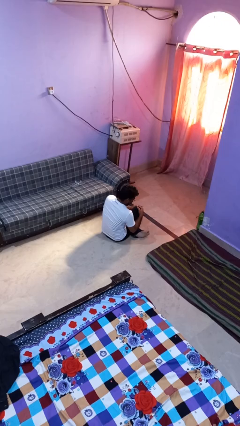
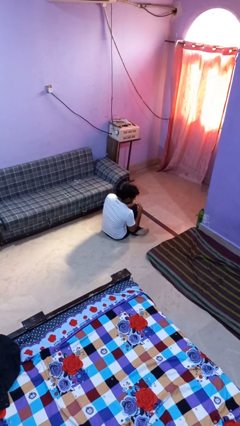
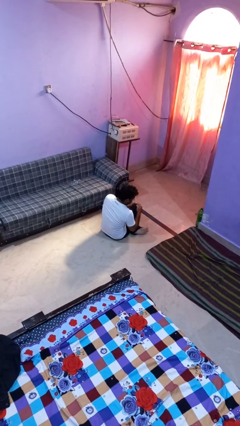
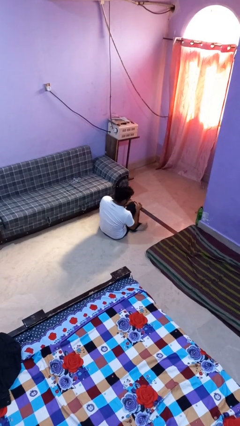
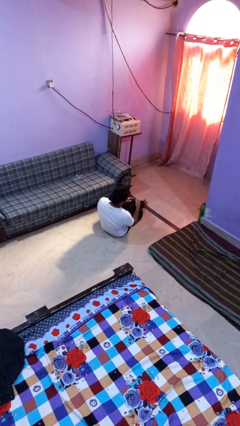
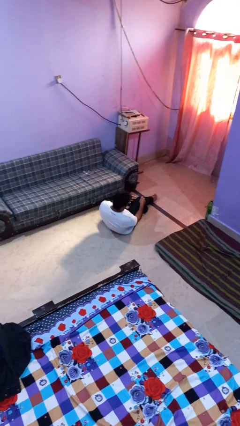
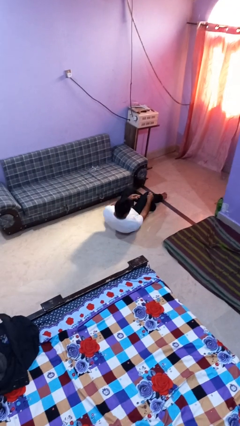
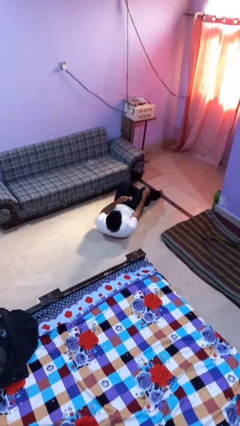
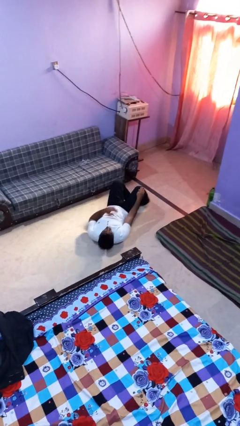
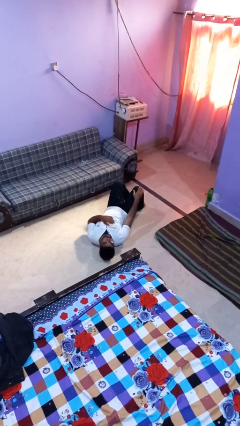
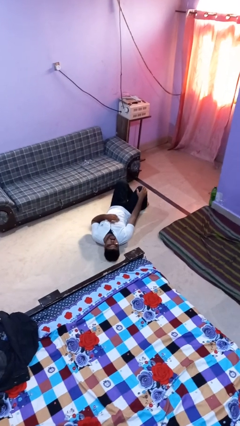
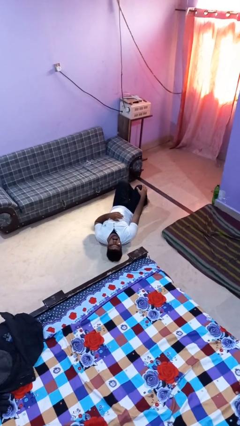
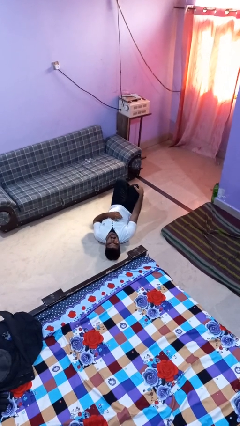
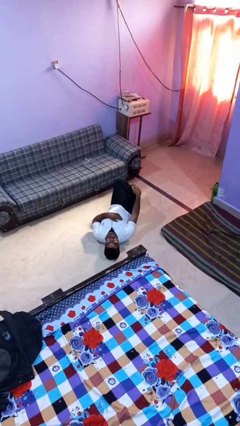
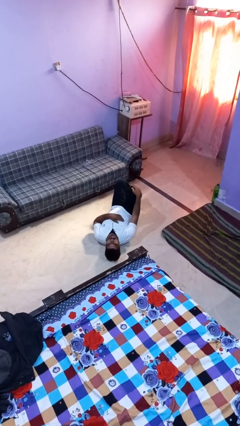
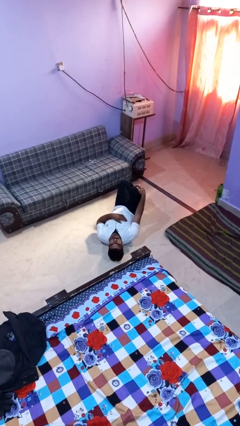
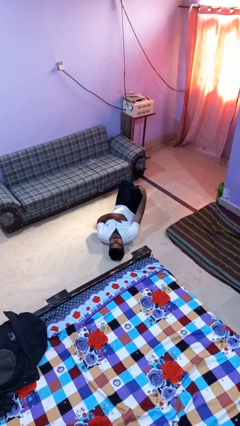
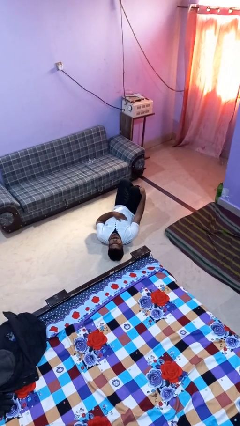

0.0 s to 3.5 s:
person lies down on floor

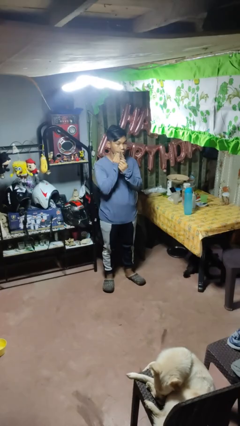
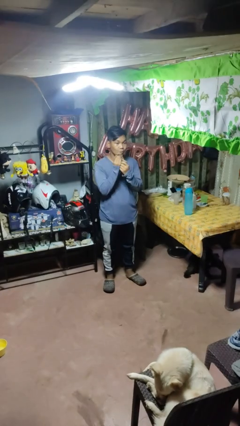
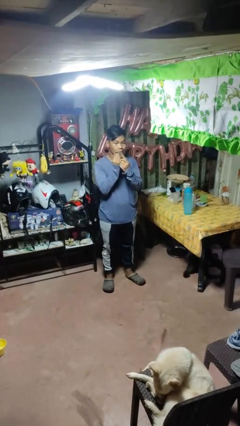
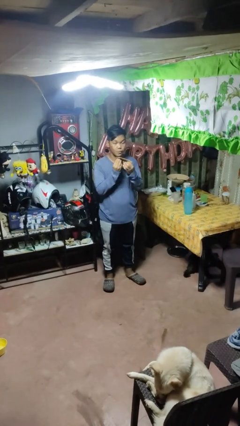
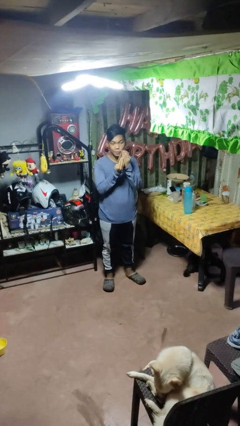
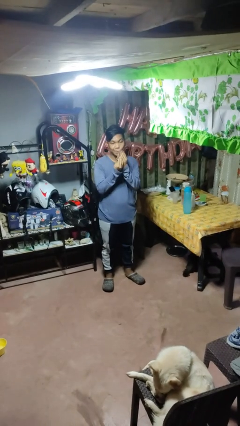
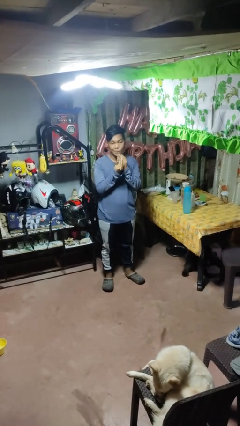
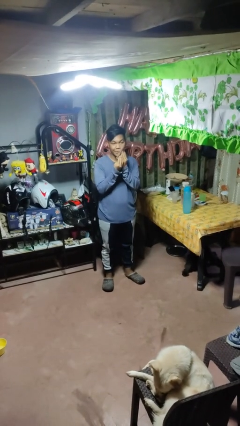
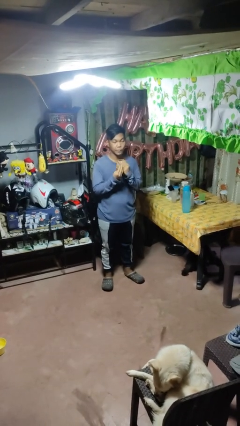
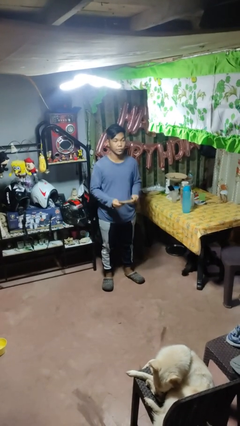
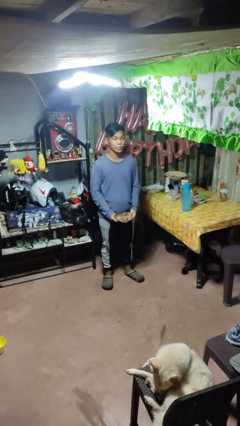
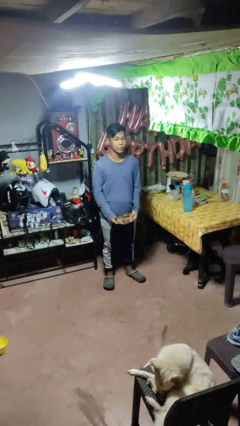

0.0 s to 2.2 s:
person wipes mouth with napkin

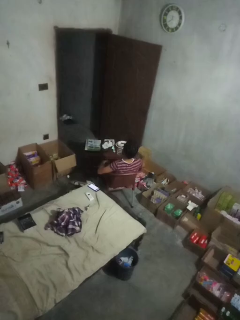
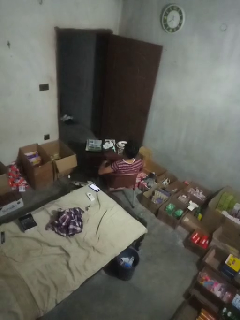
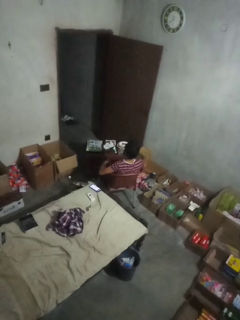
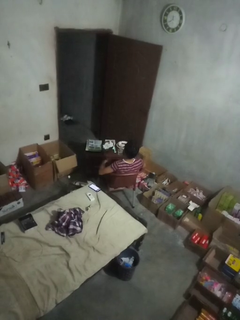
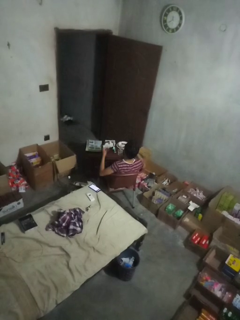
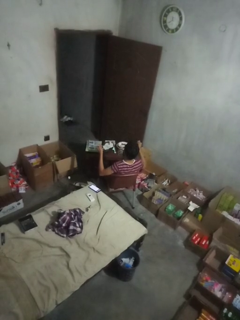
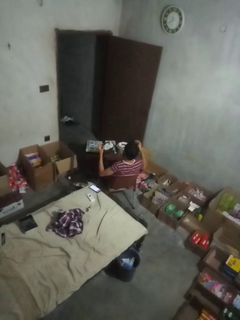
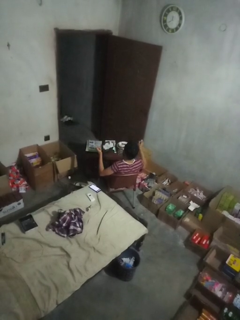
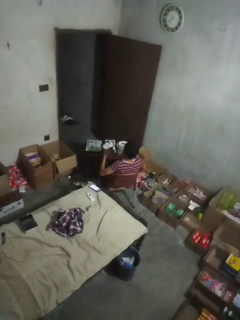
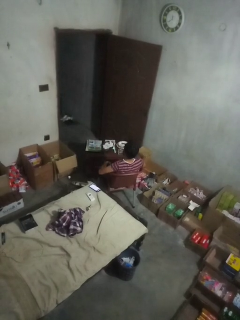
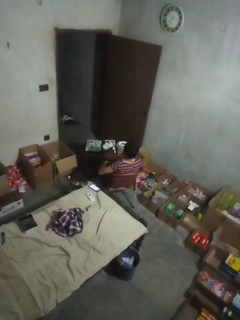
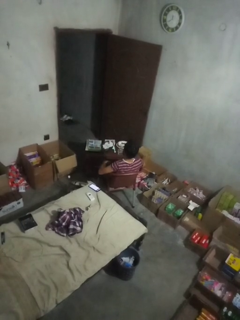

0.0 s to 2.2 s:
person snaps fingers

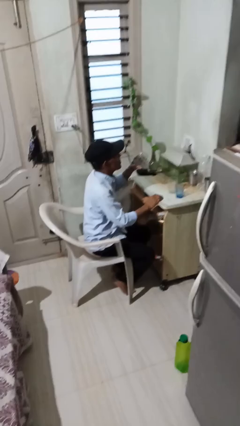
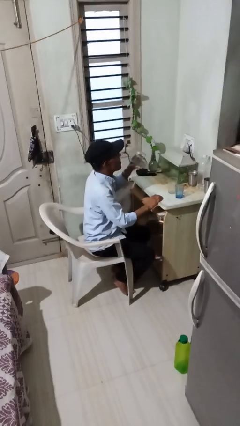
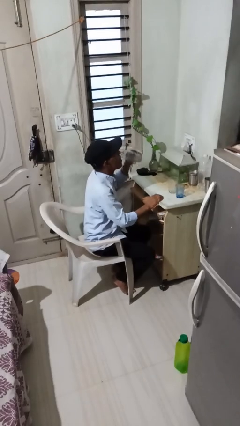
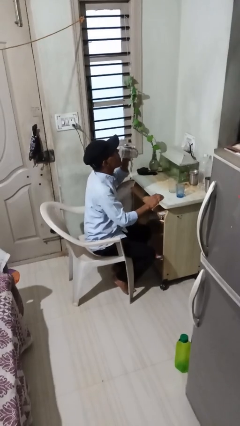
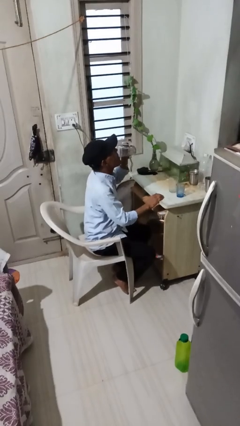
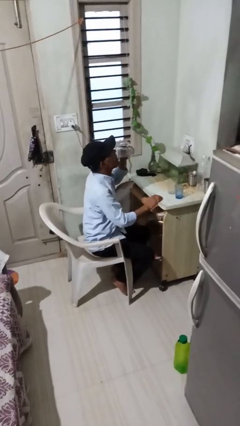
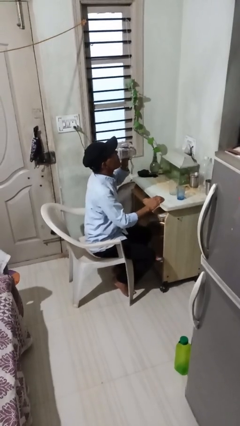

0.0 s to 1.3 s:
person drinks from shotglass

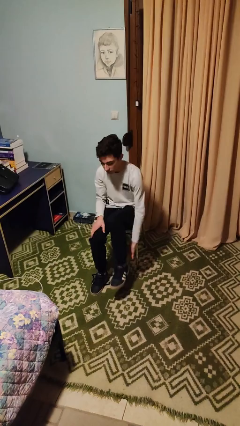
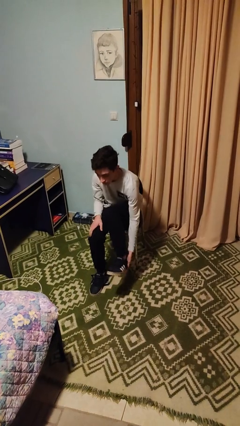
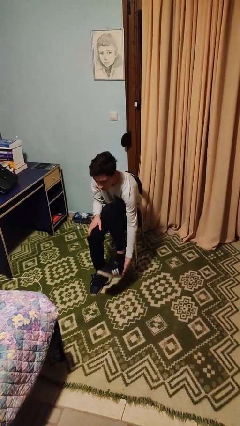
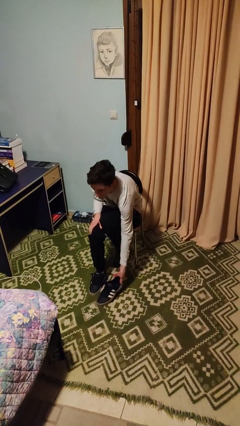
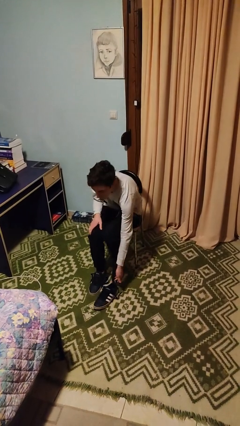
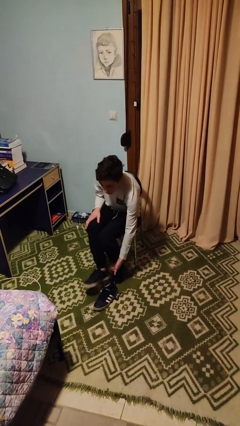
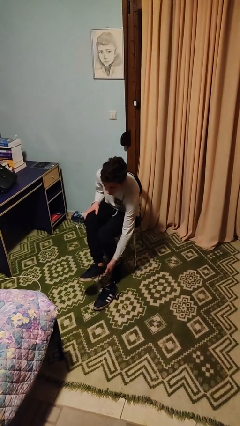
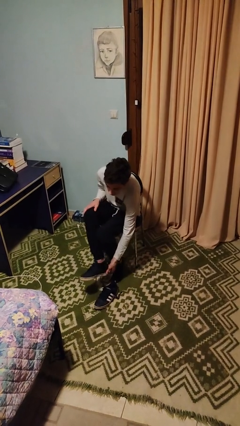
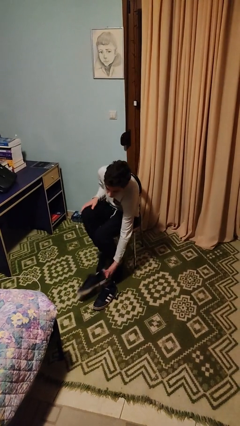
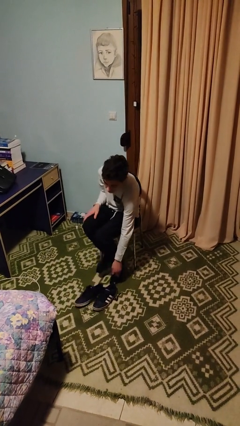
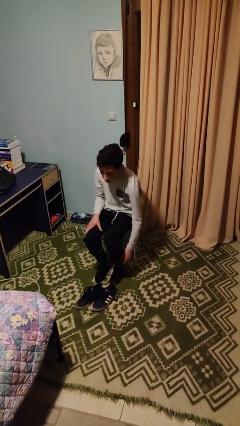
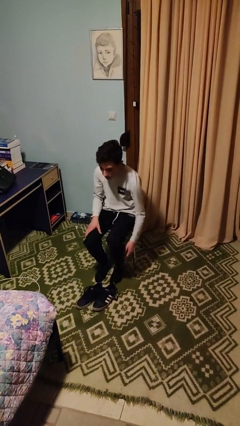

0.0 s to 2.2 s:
person takes off shoes

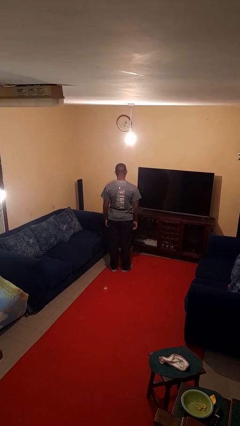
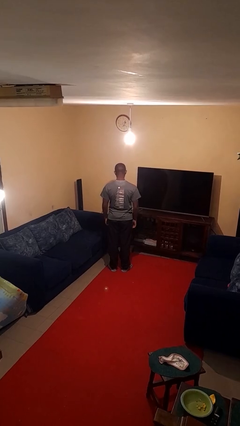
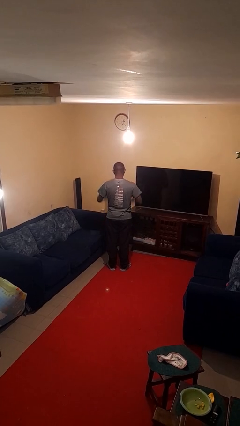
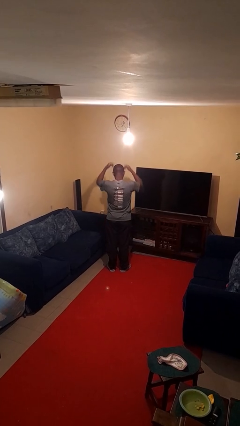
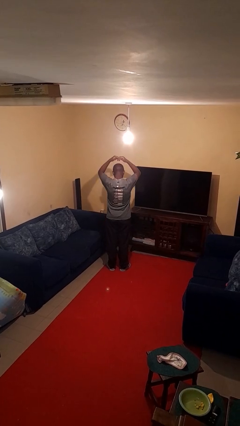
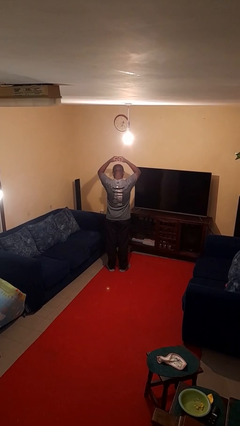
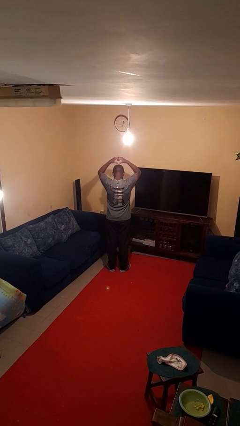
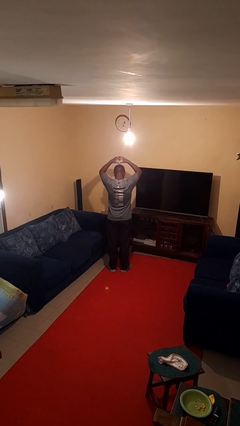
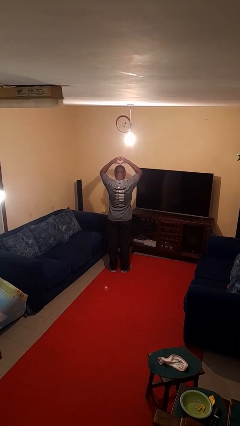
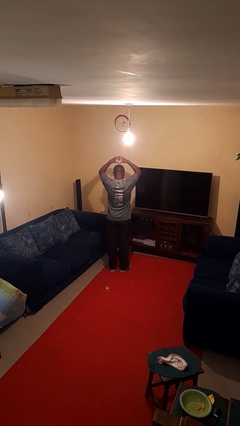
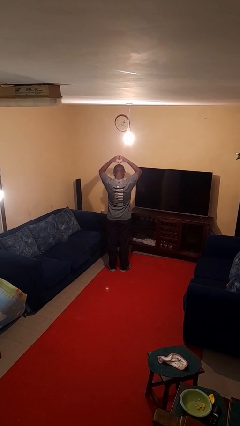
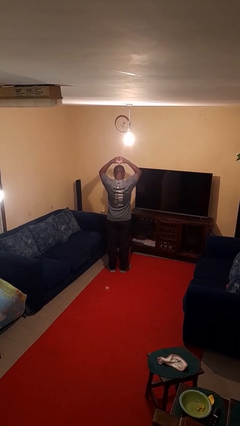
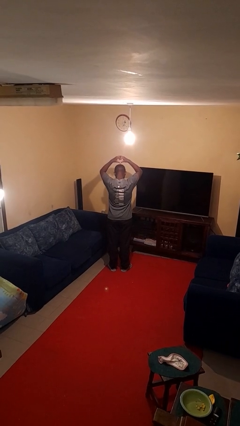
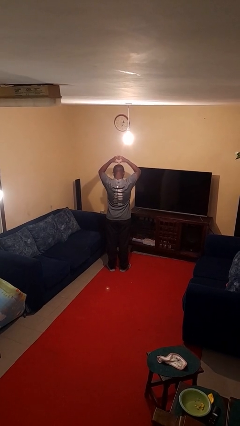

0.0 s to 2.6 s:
person gestures heart

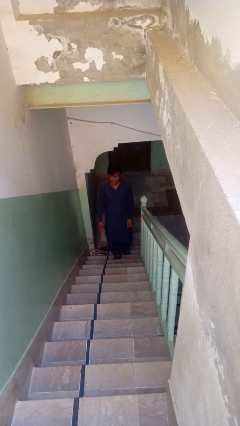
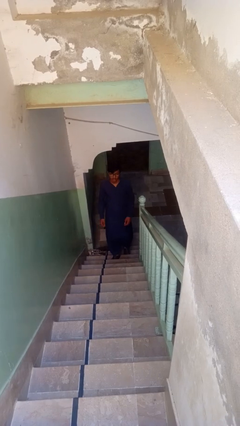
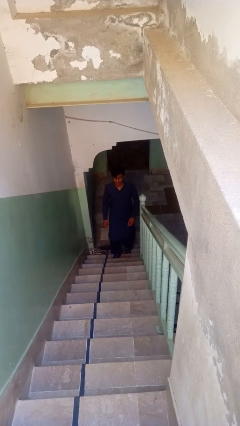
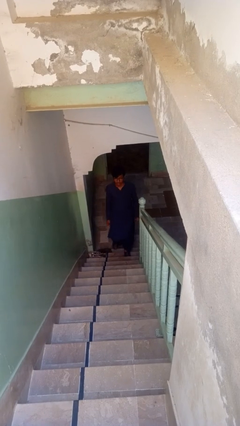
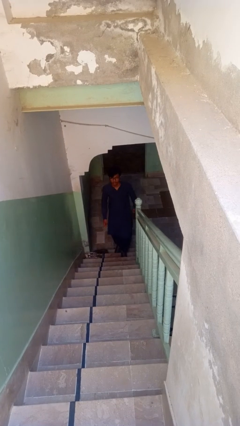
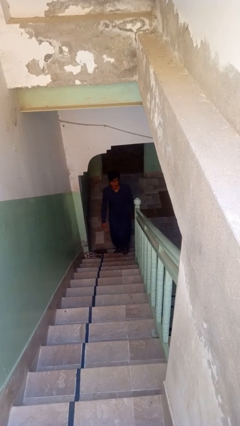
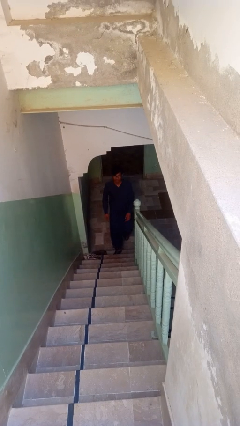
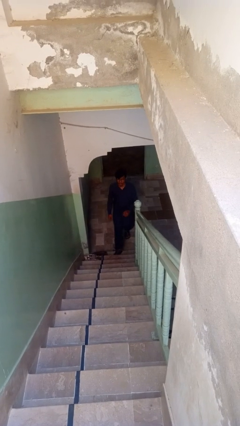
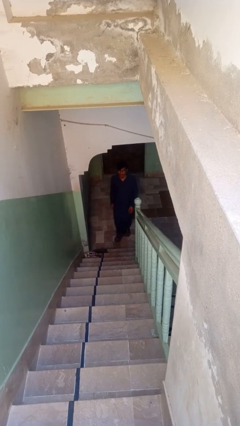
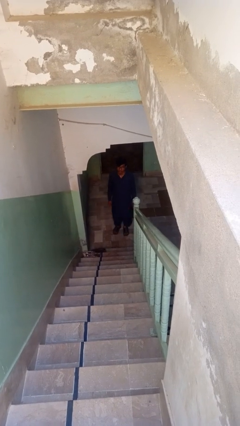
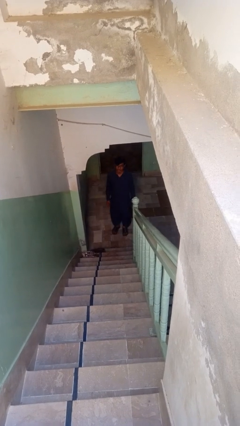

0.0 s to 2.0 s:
person climbs down stairs

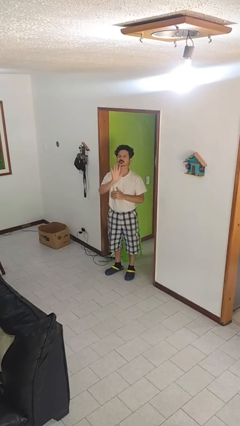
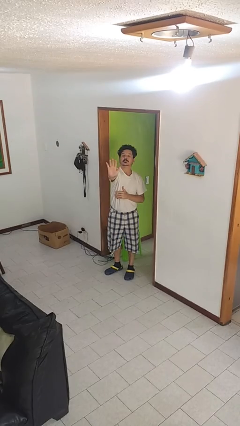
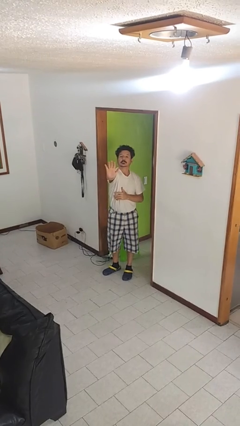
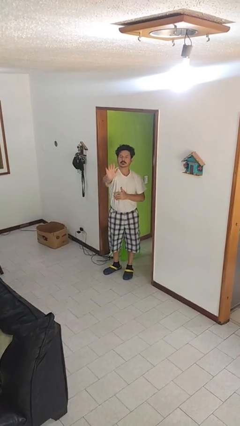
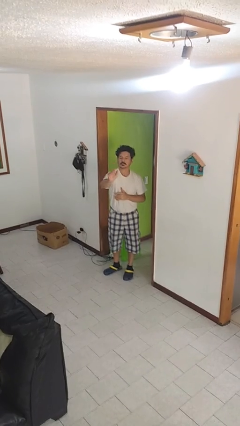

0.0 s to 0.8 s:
person gestures stop

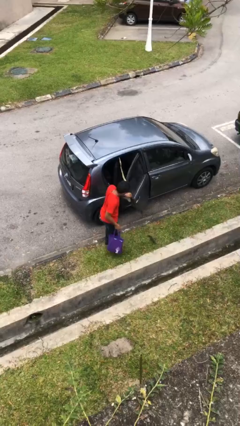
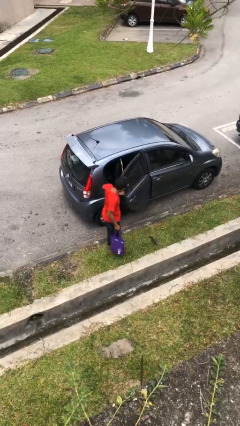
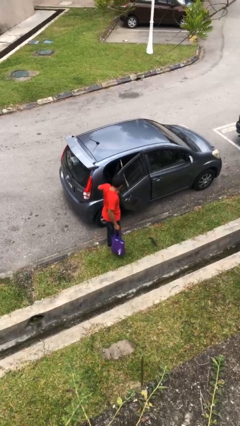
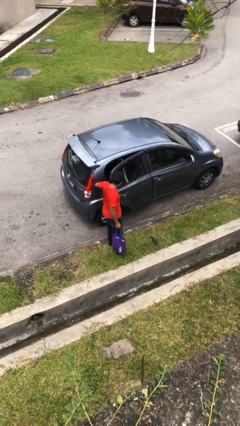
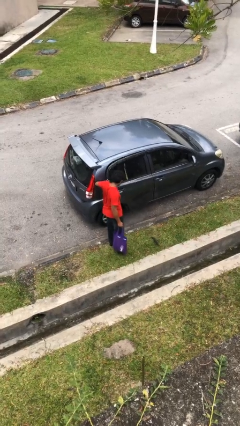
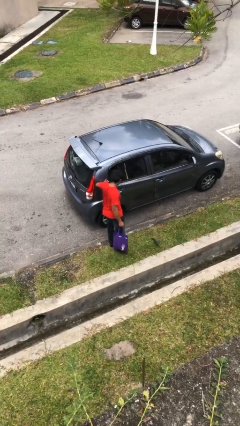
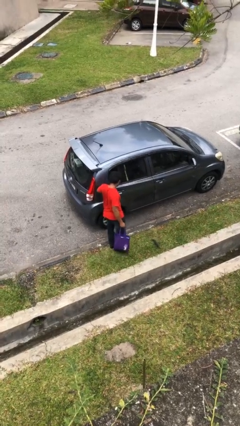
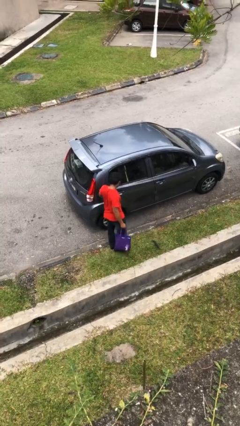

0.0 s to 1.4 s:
person closes car door
